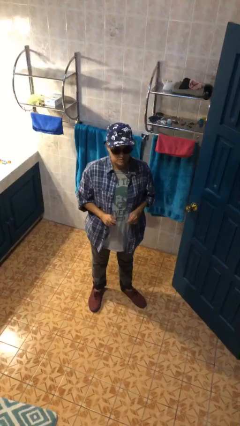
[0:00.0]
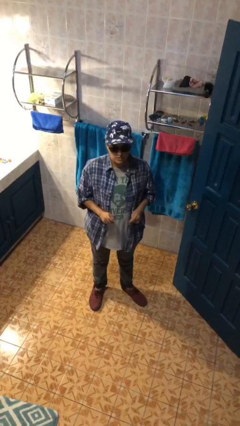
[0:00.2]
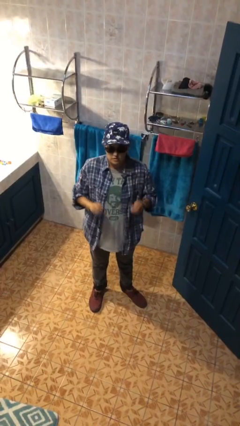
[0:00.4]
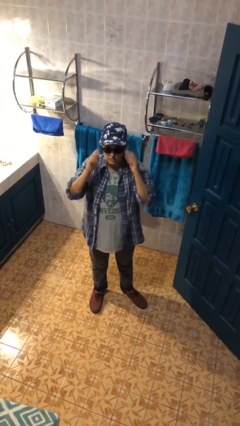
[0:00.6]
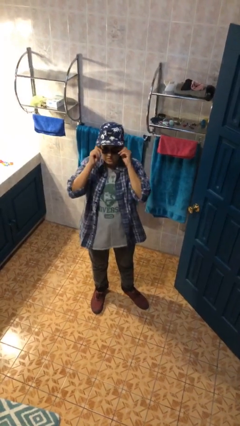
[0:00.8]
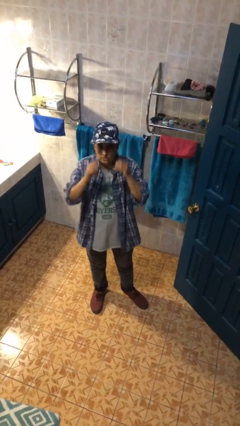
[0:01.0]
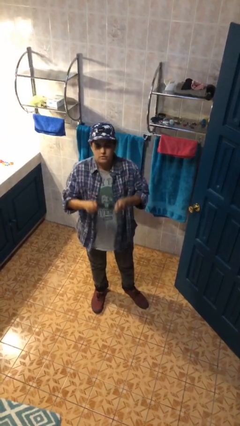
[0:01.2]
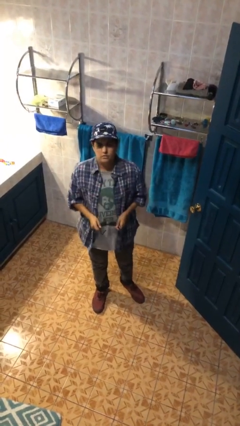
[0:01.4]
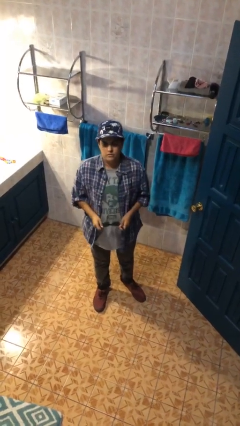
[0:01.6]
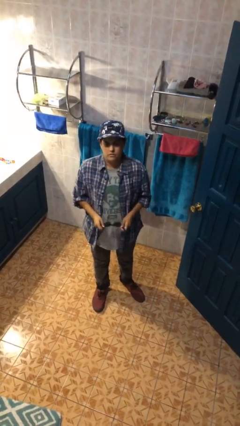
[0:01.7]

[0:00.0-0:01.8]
person takes off sunglasses

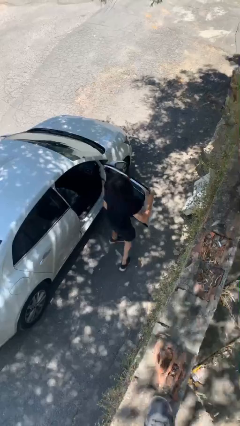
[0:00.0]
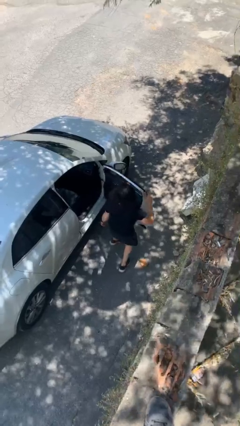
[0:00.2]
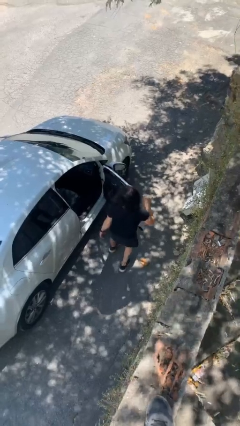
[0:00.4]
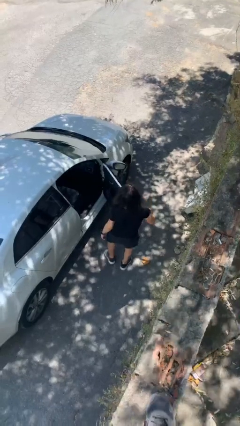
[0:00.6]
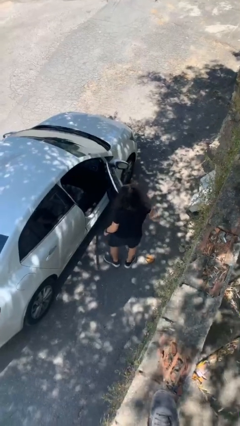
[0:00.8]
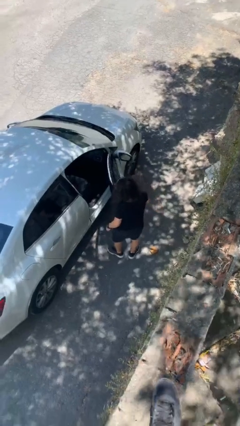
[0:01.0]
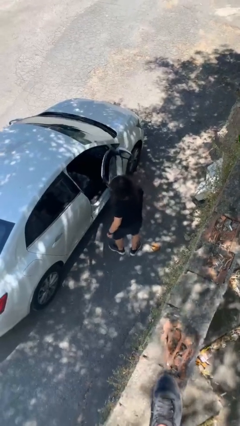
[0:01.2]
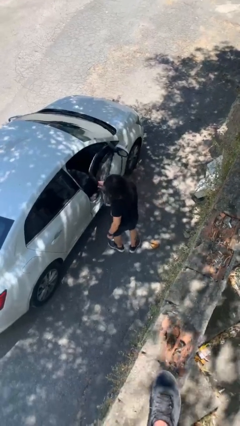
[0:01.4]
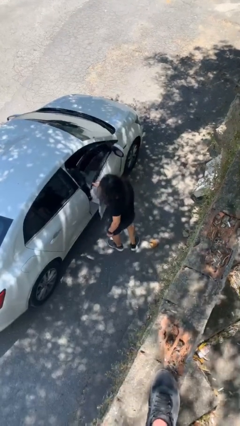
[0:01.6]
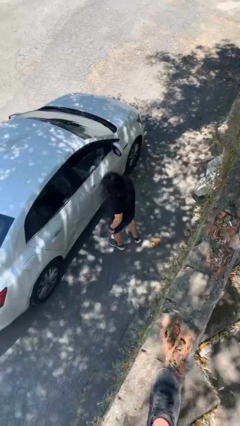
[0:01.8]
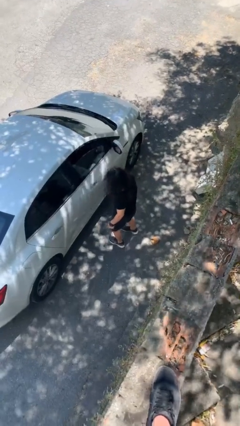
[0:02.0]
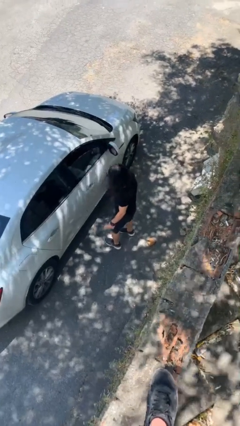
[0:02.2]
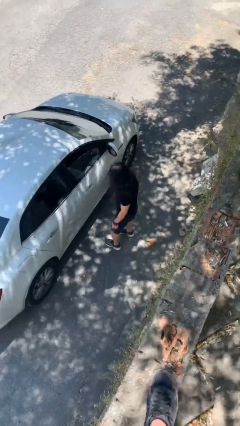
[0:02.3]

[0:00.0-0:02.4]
person closes car door

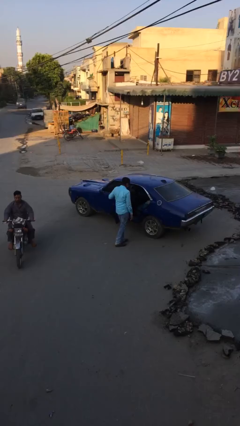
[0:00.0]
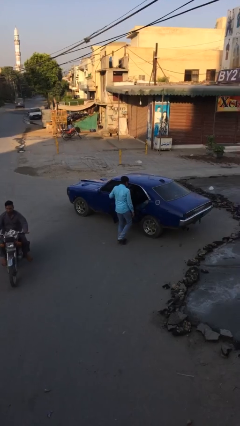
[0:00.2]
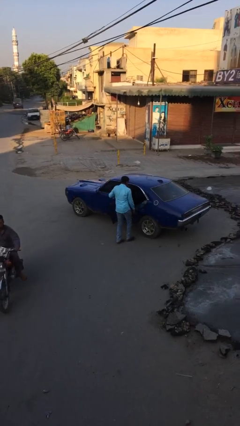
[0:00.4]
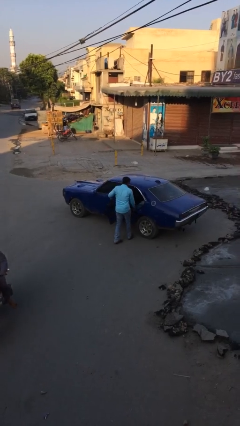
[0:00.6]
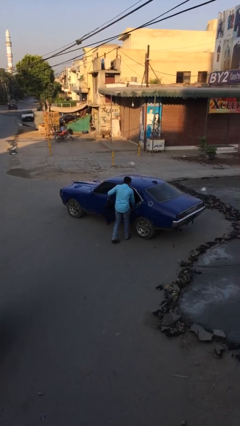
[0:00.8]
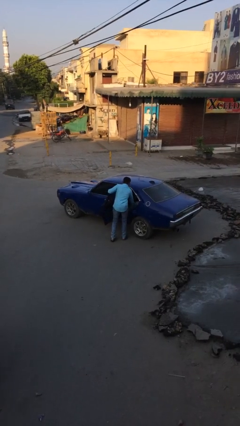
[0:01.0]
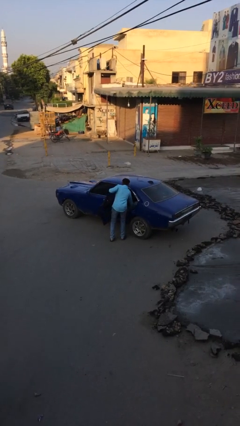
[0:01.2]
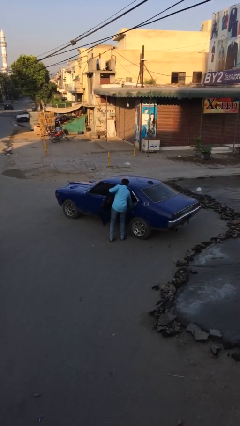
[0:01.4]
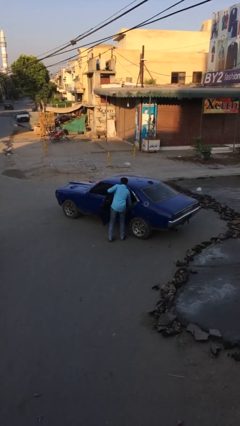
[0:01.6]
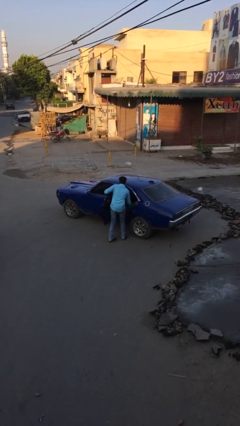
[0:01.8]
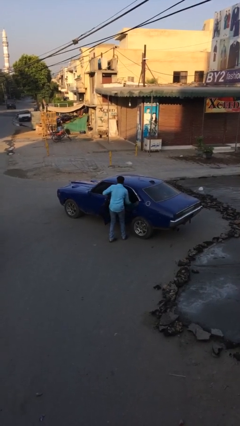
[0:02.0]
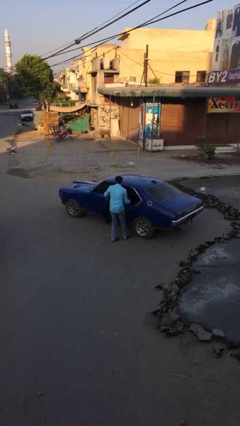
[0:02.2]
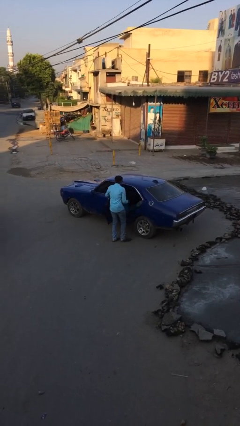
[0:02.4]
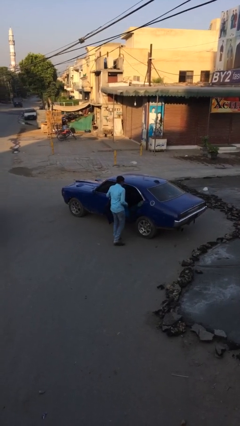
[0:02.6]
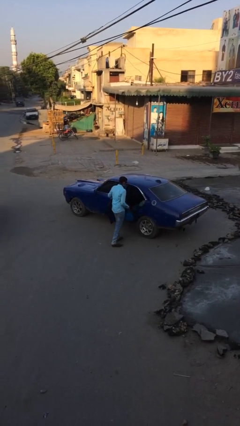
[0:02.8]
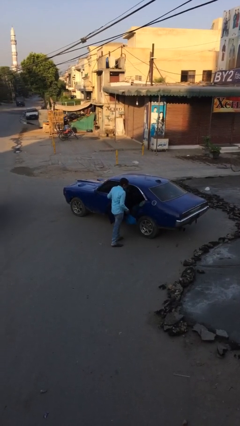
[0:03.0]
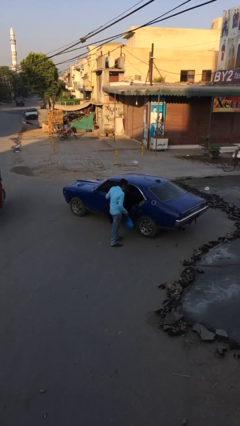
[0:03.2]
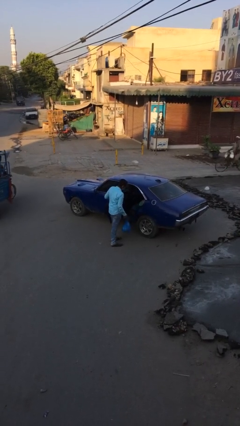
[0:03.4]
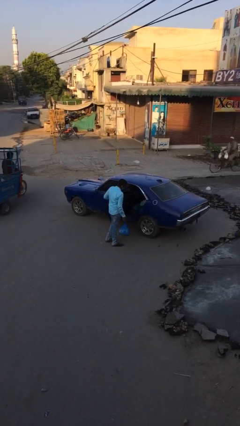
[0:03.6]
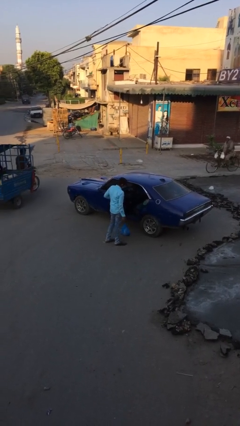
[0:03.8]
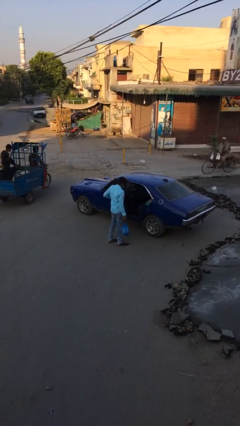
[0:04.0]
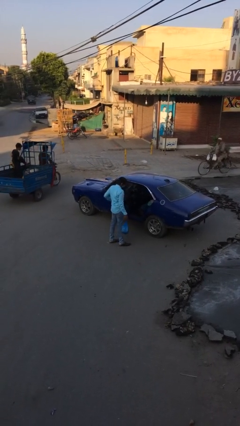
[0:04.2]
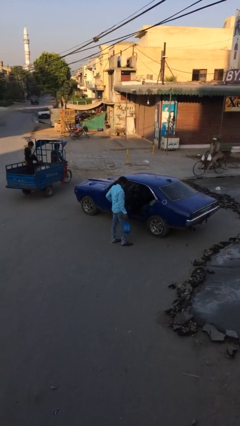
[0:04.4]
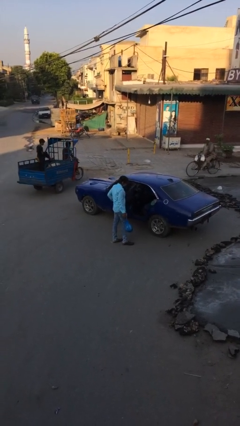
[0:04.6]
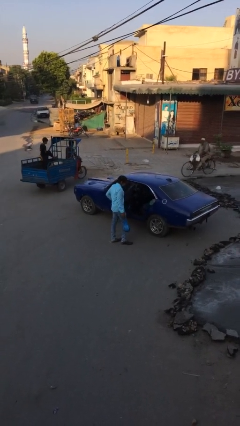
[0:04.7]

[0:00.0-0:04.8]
person unloads car

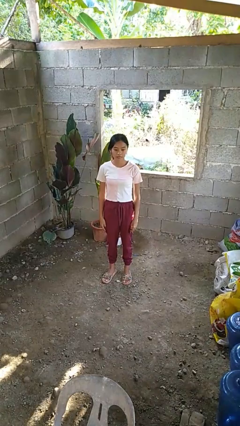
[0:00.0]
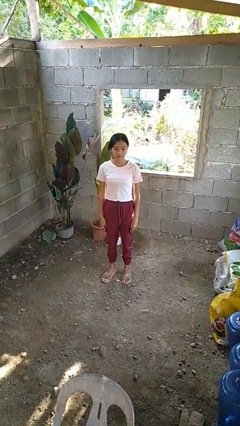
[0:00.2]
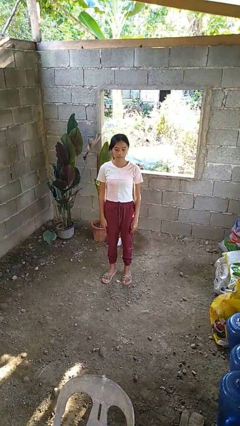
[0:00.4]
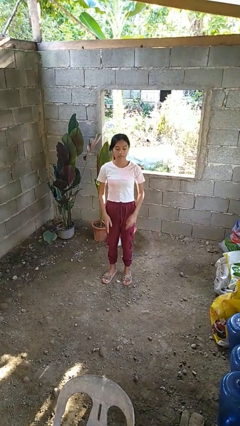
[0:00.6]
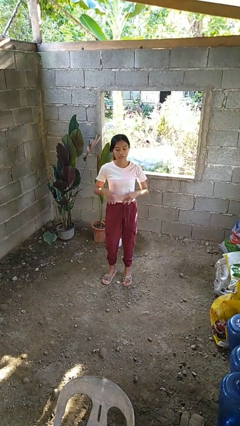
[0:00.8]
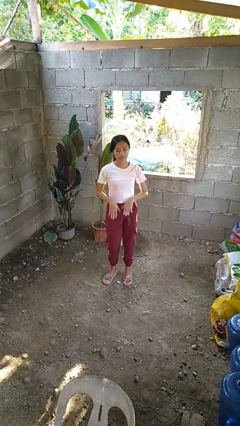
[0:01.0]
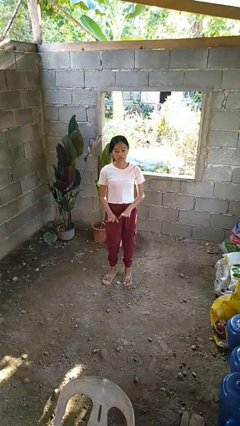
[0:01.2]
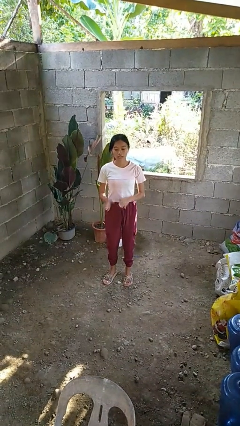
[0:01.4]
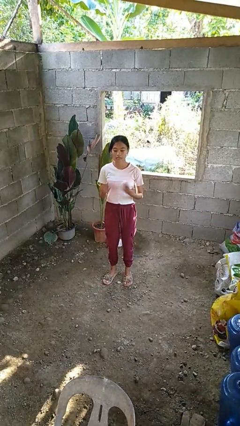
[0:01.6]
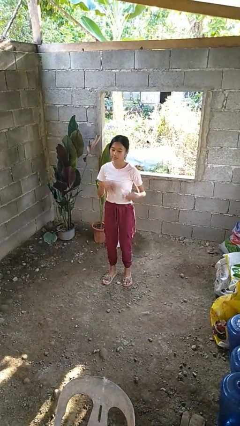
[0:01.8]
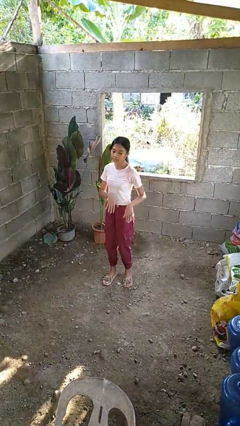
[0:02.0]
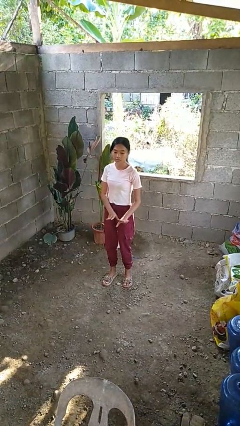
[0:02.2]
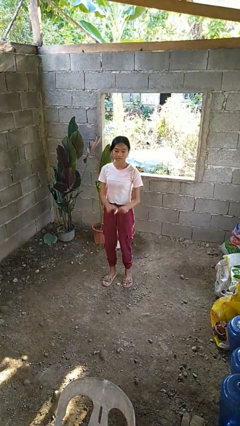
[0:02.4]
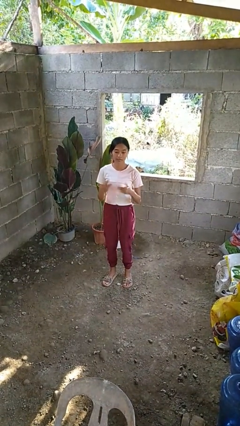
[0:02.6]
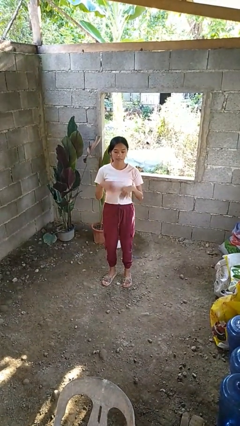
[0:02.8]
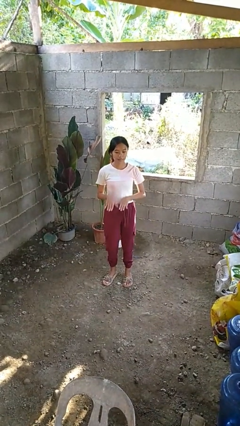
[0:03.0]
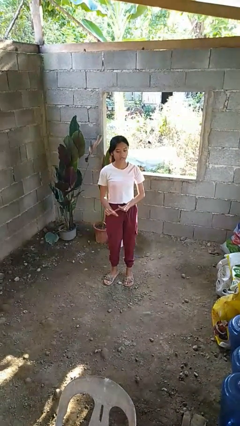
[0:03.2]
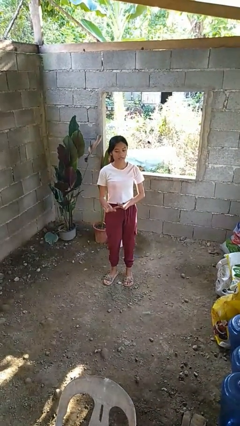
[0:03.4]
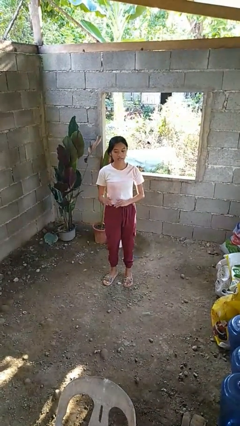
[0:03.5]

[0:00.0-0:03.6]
person dances in place

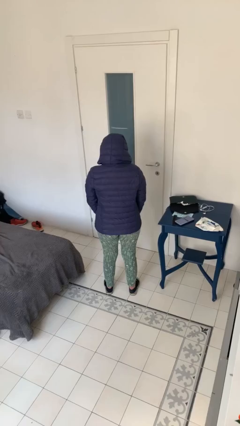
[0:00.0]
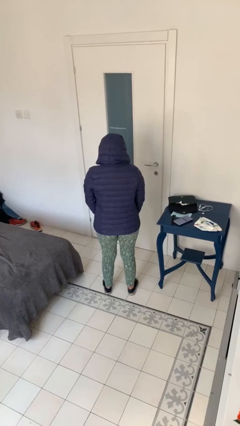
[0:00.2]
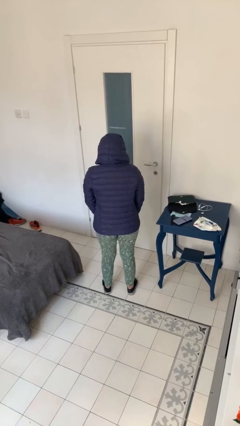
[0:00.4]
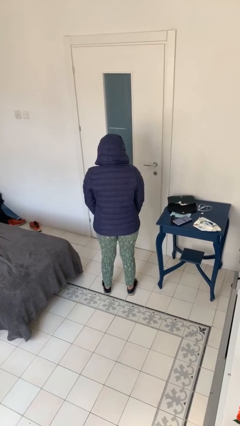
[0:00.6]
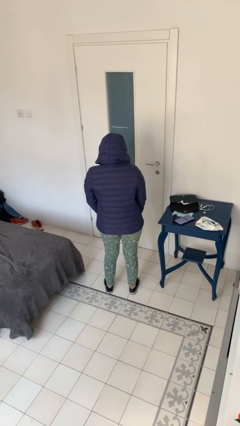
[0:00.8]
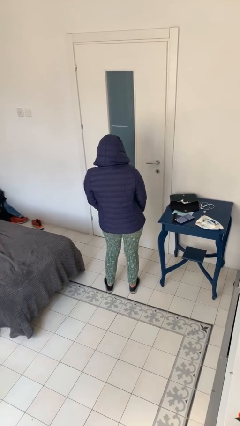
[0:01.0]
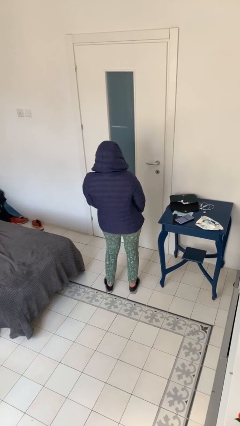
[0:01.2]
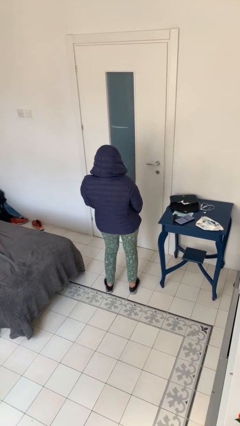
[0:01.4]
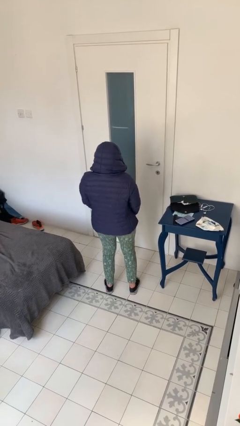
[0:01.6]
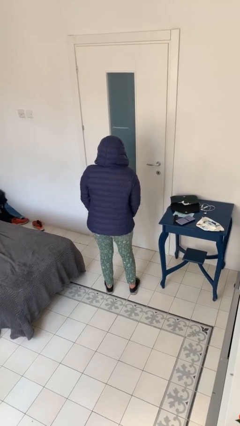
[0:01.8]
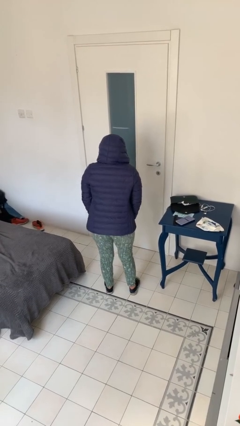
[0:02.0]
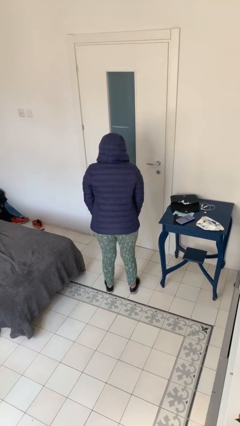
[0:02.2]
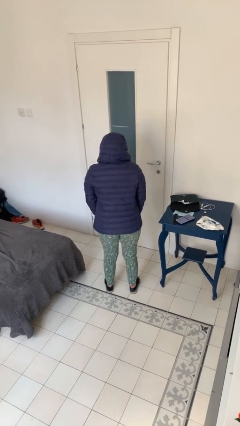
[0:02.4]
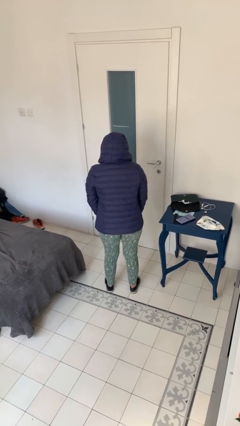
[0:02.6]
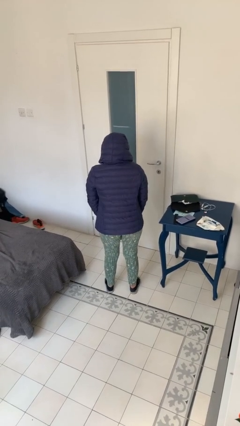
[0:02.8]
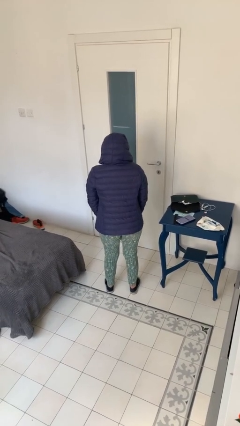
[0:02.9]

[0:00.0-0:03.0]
person wiggles hips

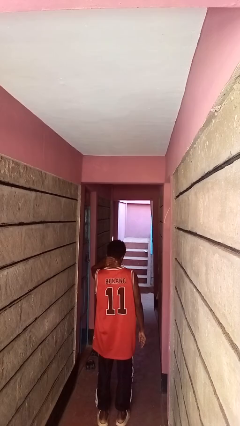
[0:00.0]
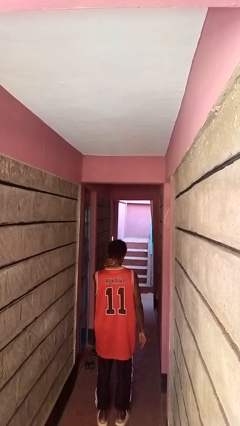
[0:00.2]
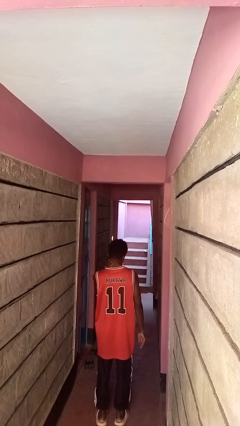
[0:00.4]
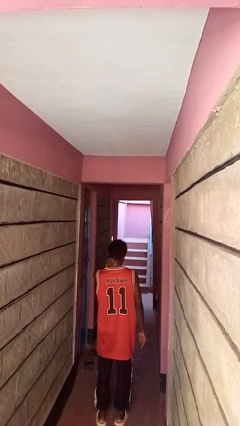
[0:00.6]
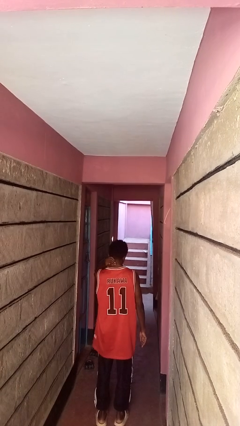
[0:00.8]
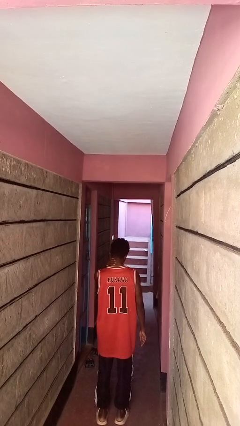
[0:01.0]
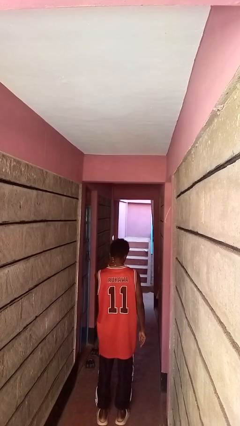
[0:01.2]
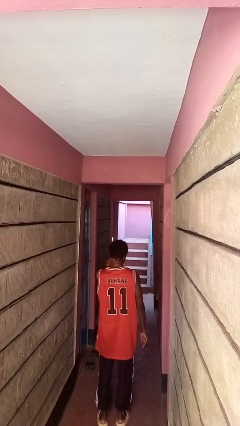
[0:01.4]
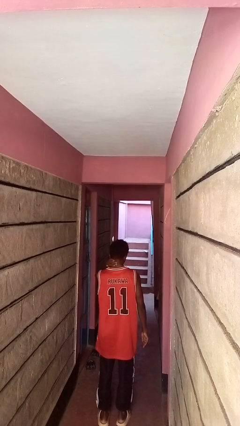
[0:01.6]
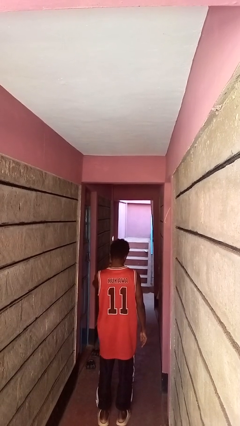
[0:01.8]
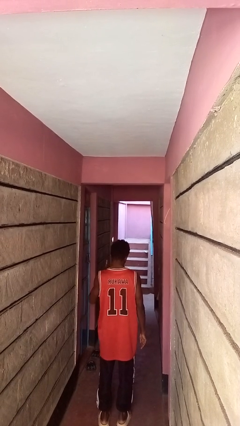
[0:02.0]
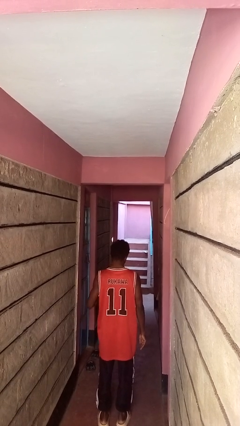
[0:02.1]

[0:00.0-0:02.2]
person rubs neck
